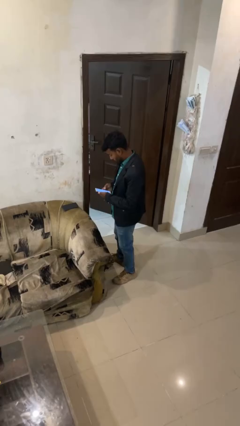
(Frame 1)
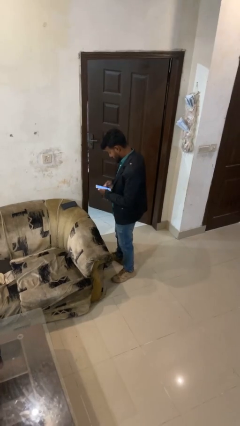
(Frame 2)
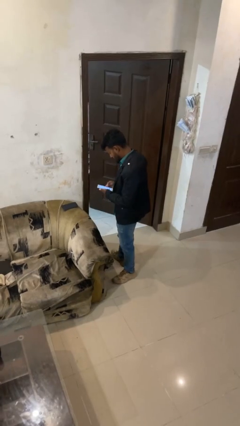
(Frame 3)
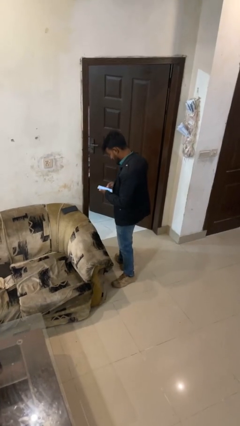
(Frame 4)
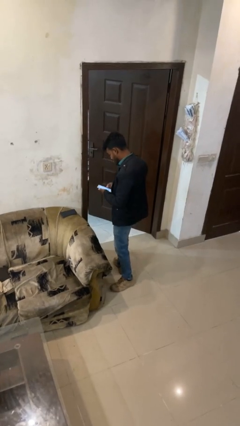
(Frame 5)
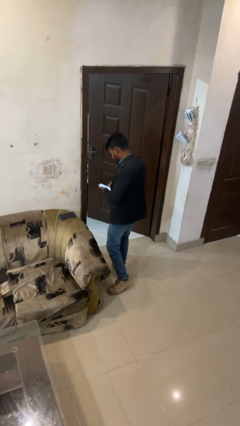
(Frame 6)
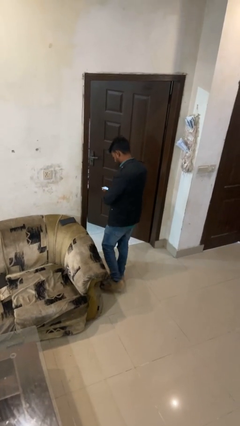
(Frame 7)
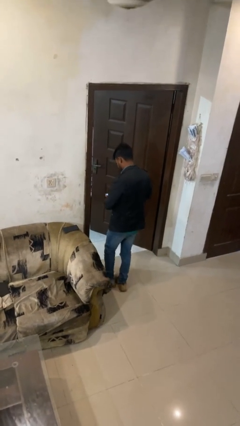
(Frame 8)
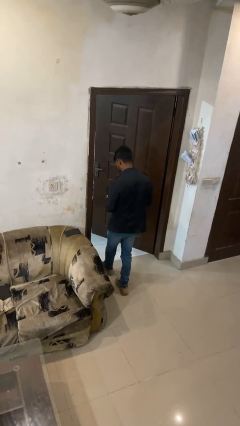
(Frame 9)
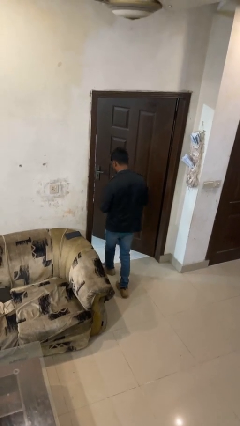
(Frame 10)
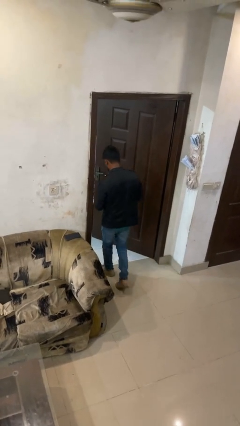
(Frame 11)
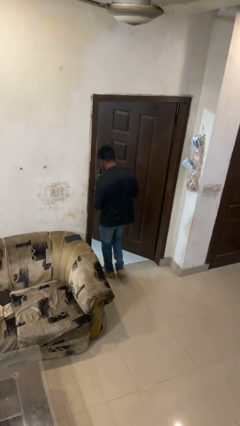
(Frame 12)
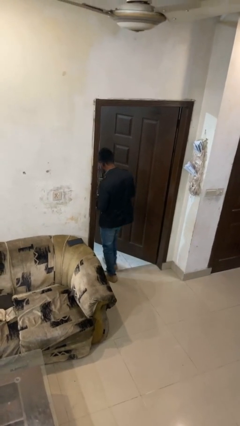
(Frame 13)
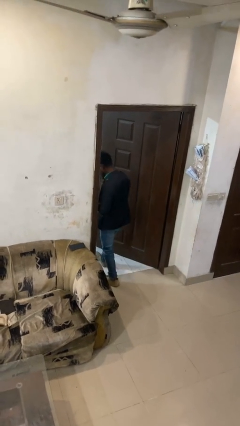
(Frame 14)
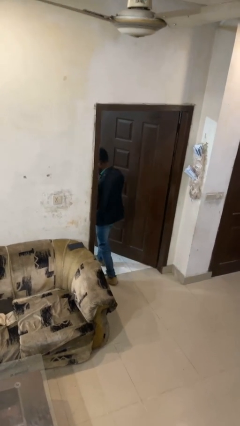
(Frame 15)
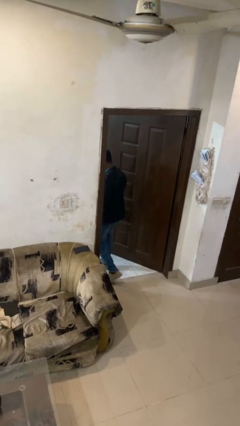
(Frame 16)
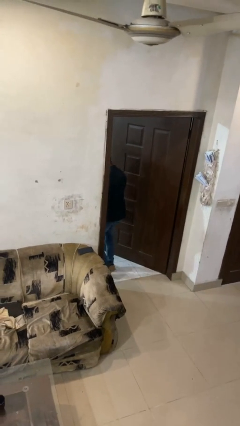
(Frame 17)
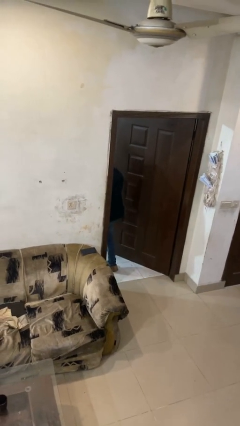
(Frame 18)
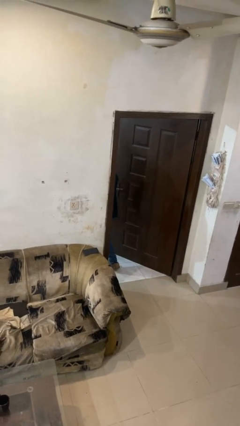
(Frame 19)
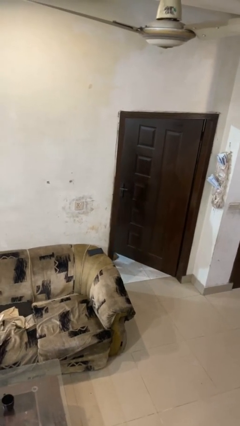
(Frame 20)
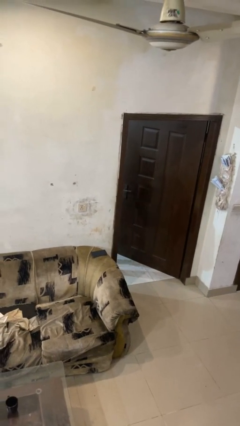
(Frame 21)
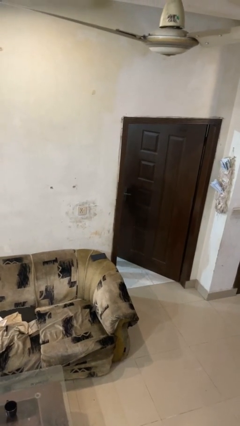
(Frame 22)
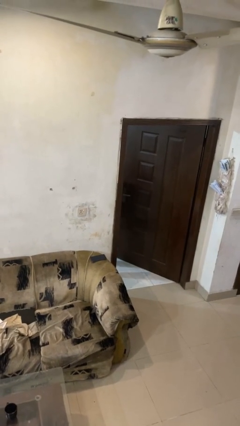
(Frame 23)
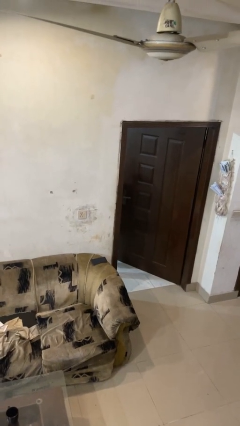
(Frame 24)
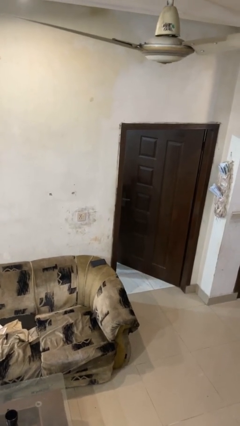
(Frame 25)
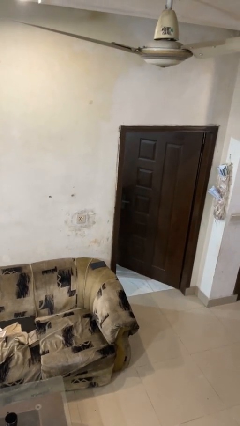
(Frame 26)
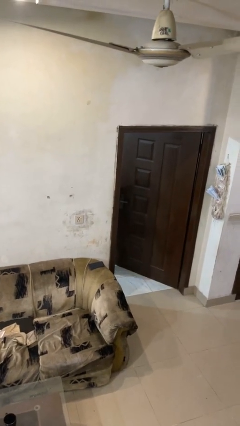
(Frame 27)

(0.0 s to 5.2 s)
person exits scene through structure

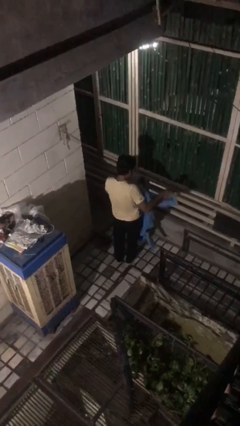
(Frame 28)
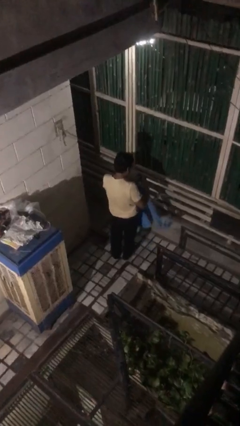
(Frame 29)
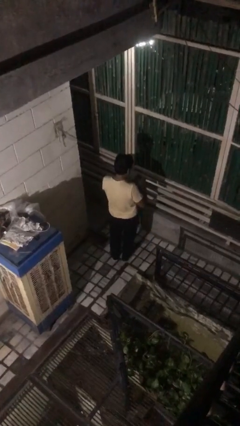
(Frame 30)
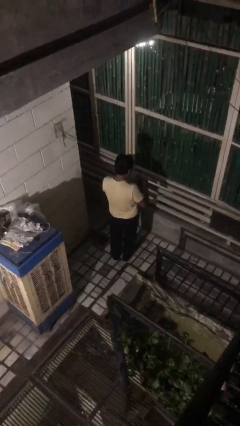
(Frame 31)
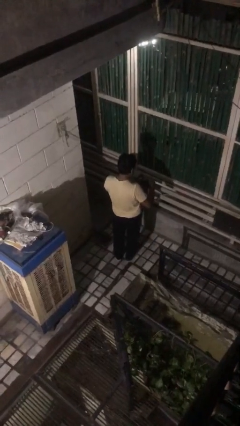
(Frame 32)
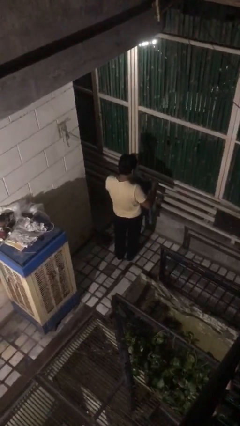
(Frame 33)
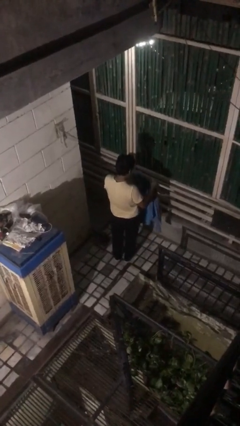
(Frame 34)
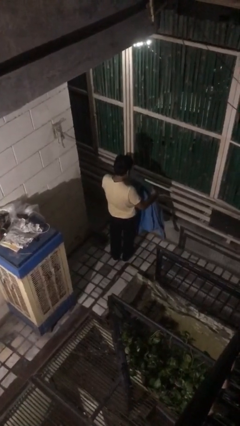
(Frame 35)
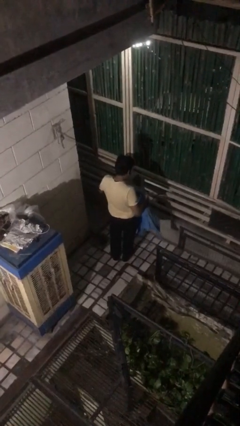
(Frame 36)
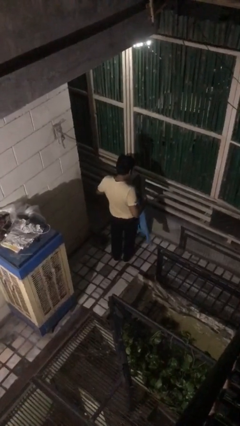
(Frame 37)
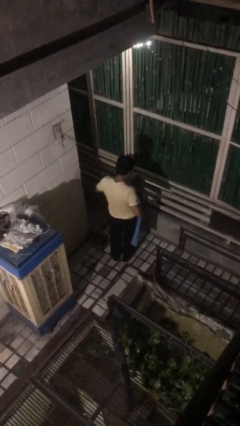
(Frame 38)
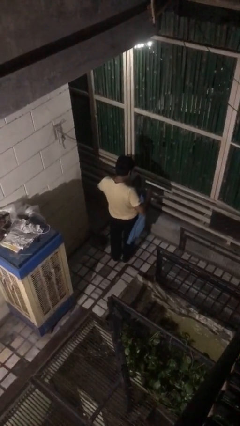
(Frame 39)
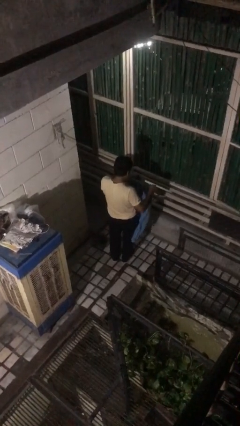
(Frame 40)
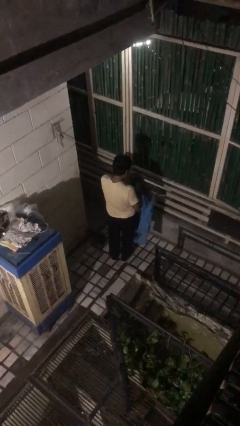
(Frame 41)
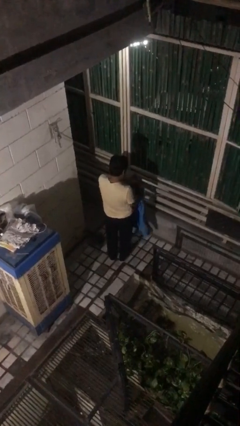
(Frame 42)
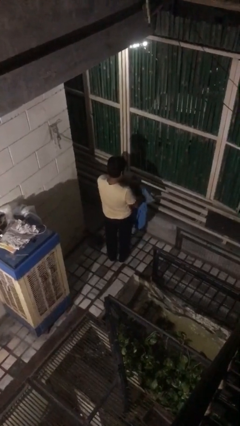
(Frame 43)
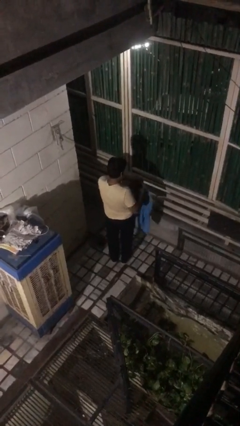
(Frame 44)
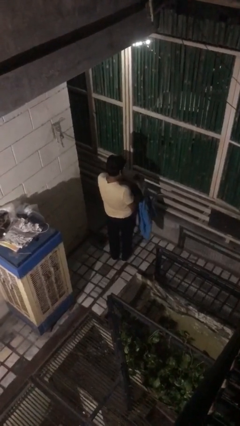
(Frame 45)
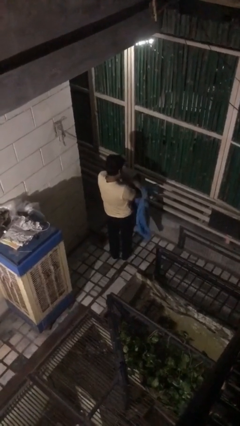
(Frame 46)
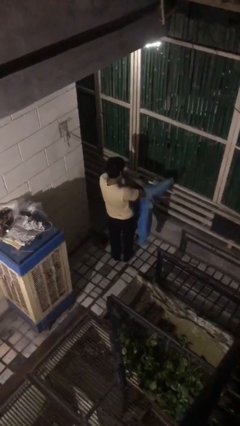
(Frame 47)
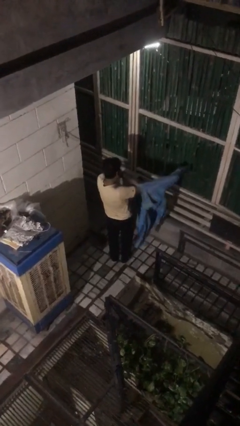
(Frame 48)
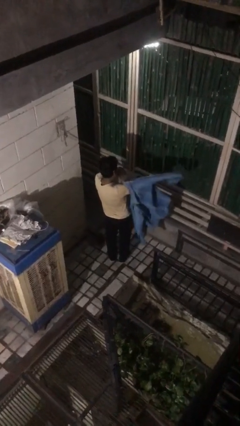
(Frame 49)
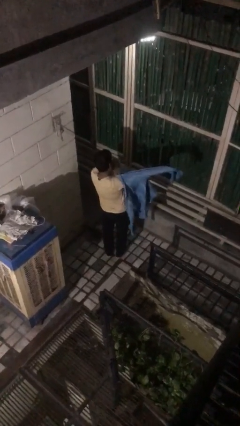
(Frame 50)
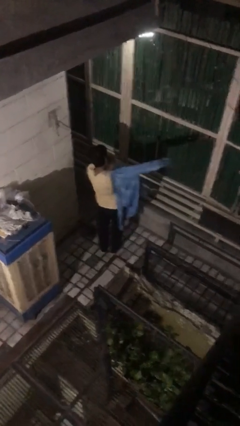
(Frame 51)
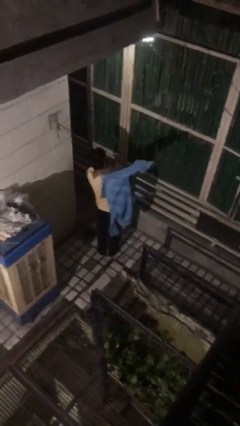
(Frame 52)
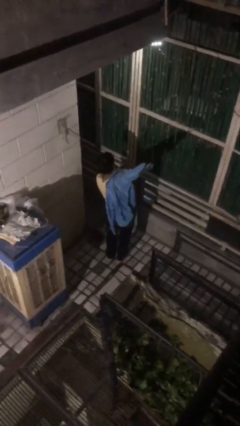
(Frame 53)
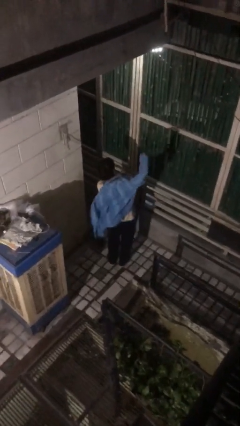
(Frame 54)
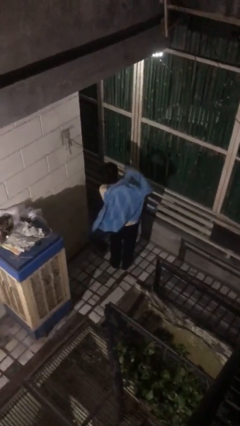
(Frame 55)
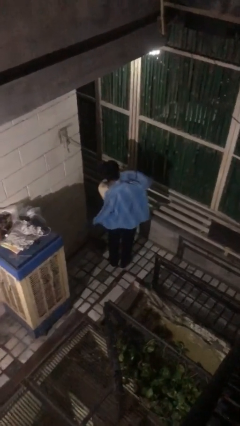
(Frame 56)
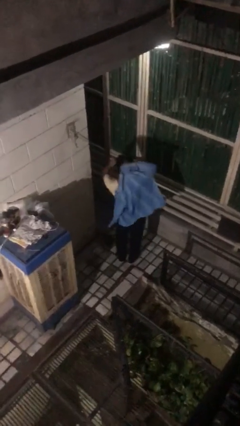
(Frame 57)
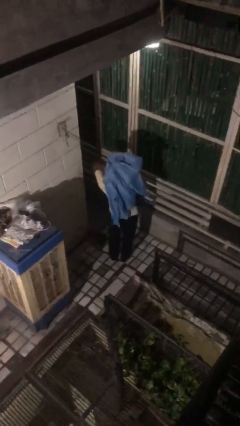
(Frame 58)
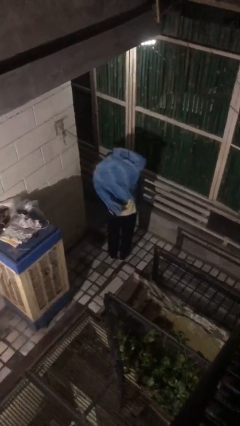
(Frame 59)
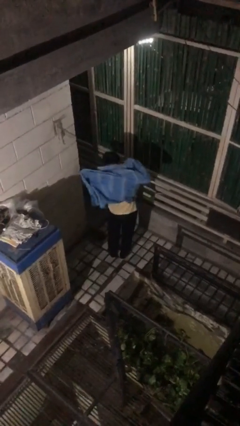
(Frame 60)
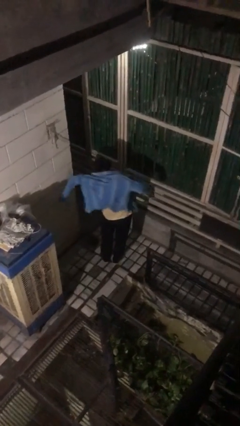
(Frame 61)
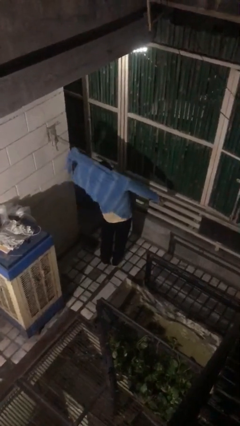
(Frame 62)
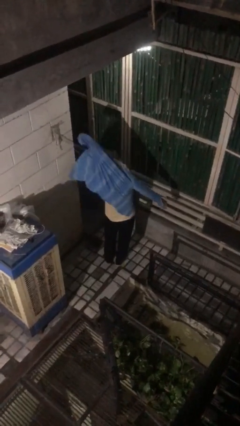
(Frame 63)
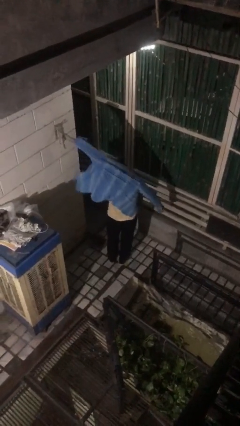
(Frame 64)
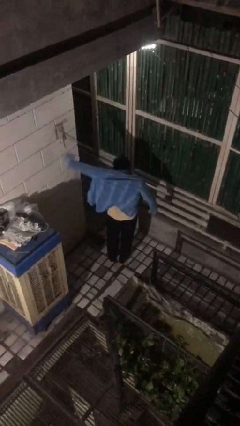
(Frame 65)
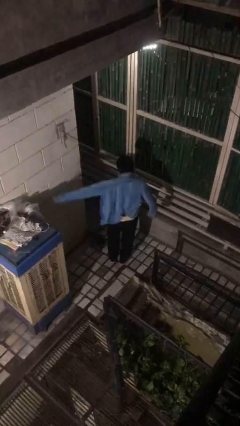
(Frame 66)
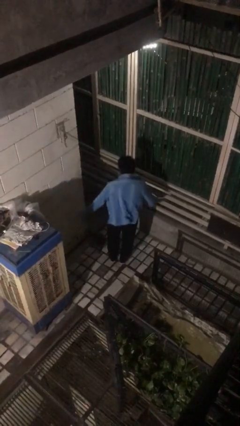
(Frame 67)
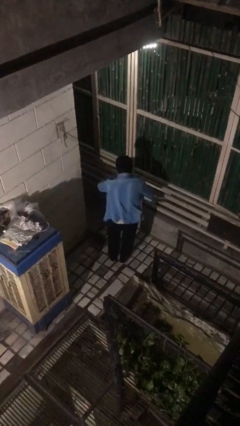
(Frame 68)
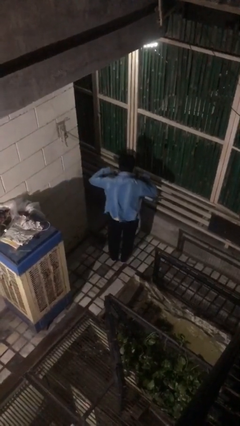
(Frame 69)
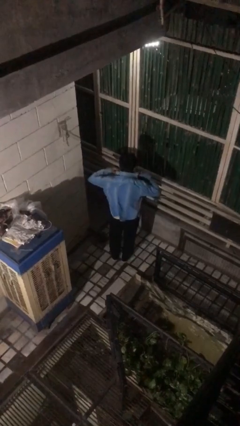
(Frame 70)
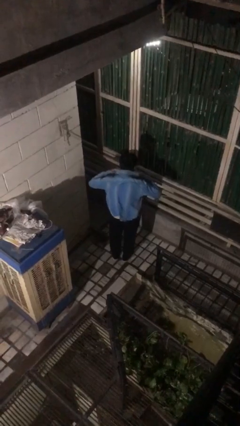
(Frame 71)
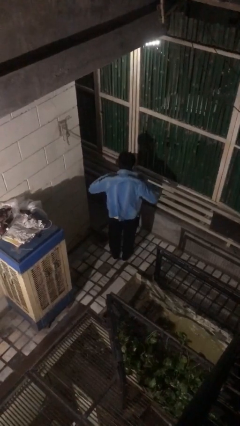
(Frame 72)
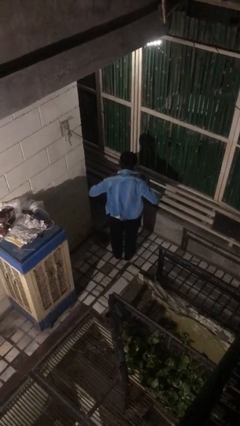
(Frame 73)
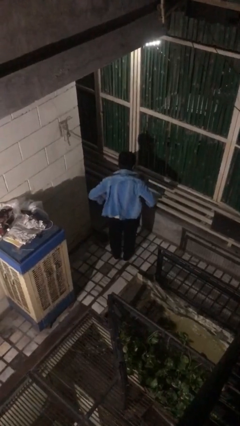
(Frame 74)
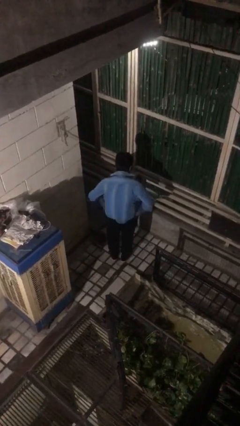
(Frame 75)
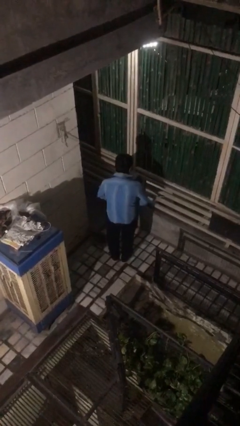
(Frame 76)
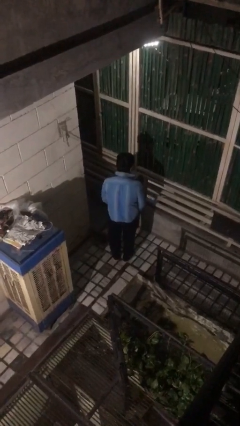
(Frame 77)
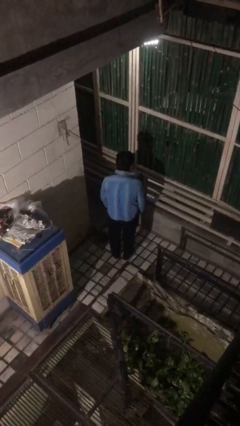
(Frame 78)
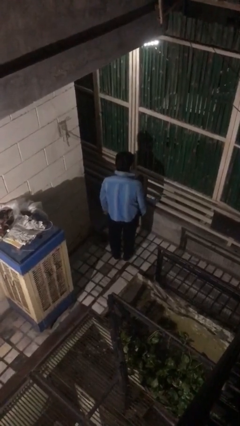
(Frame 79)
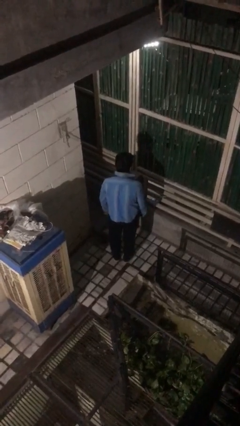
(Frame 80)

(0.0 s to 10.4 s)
person puts on shirt

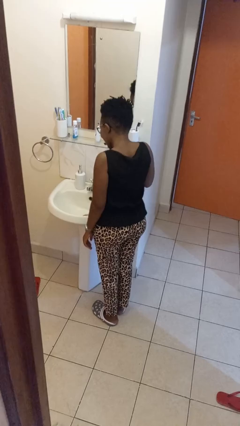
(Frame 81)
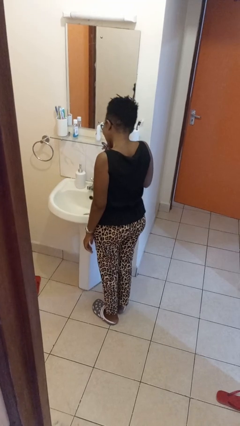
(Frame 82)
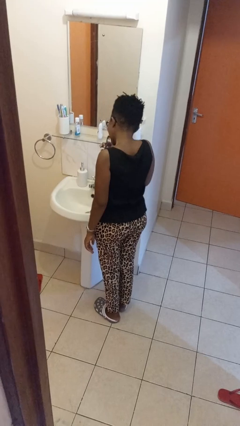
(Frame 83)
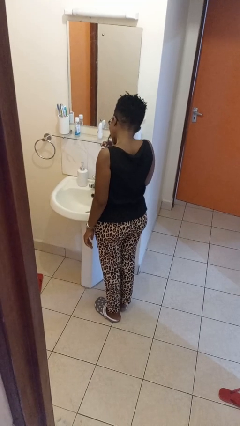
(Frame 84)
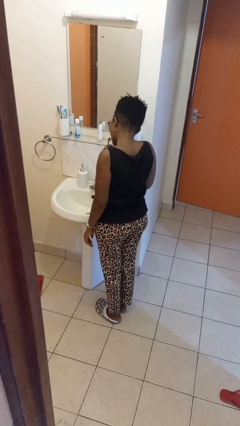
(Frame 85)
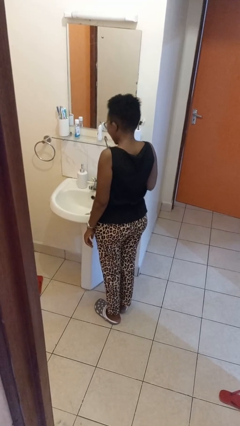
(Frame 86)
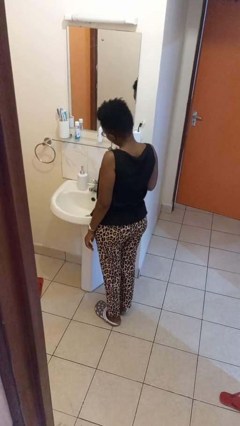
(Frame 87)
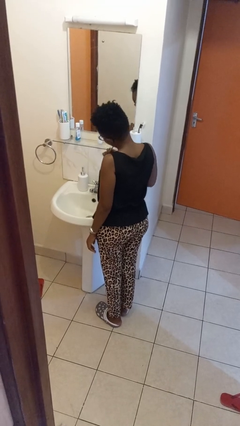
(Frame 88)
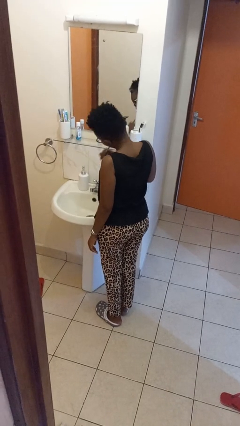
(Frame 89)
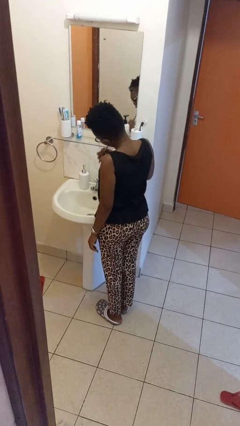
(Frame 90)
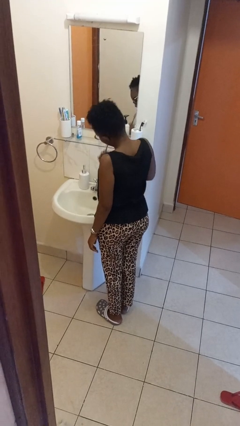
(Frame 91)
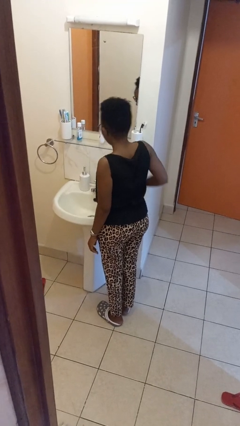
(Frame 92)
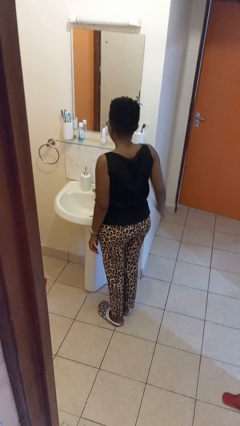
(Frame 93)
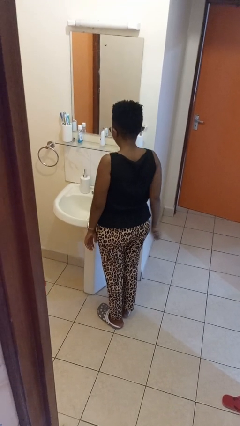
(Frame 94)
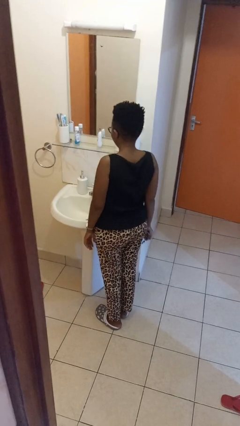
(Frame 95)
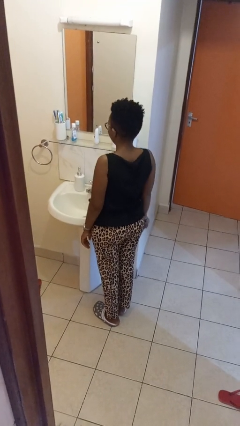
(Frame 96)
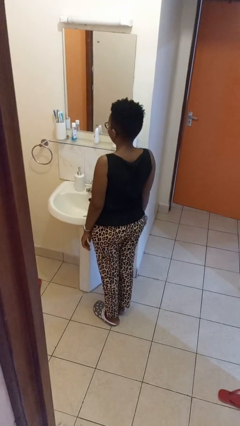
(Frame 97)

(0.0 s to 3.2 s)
person brushes teeth
